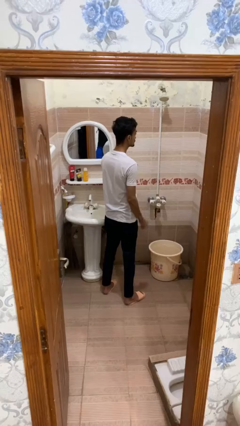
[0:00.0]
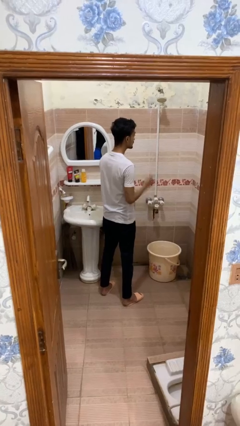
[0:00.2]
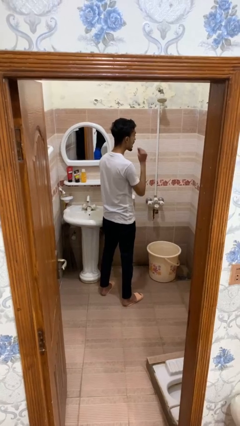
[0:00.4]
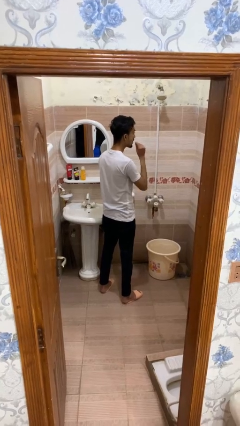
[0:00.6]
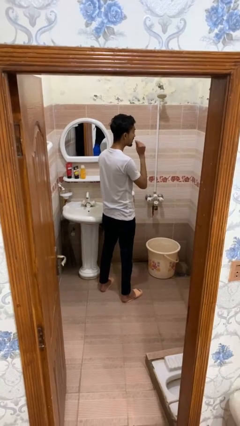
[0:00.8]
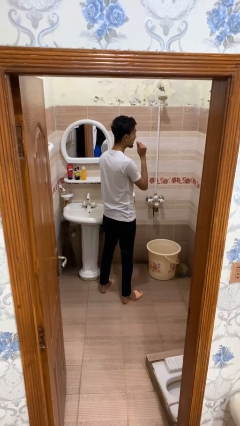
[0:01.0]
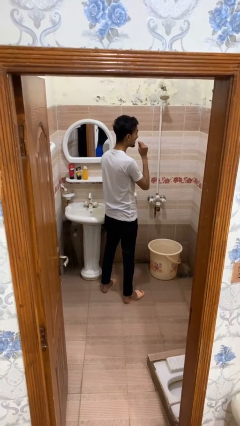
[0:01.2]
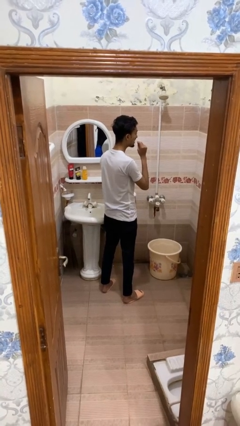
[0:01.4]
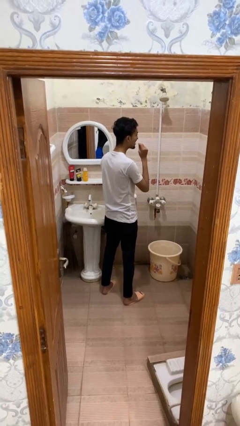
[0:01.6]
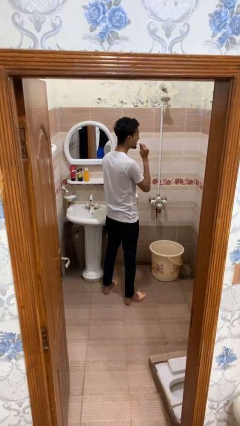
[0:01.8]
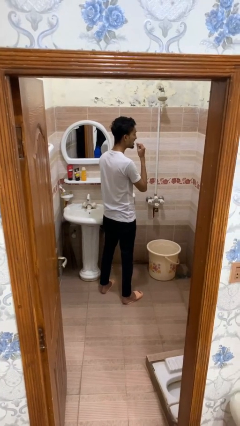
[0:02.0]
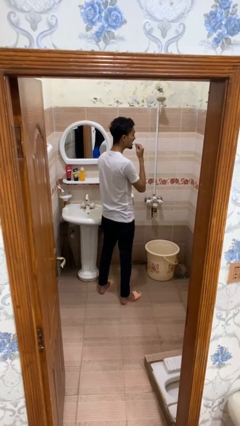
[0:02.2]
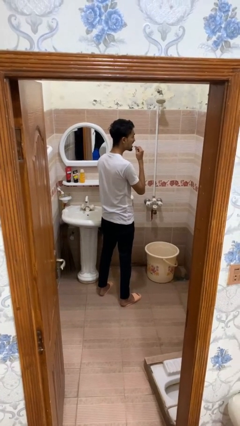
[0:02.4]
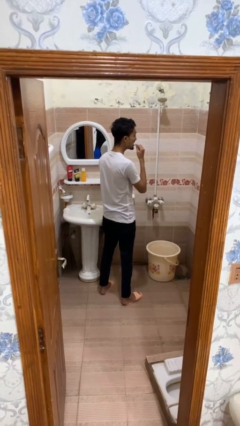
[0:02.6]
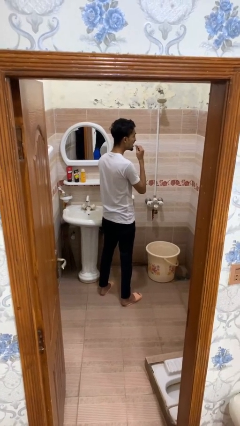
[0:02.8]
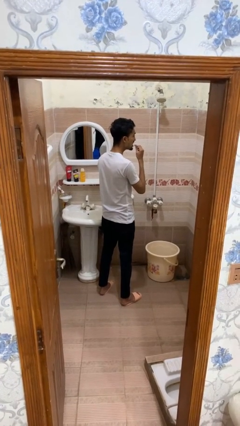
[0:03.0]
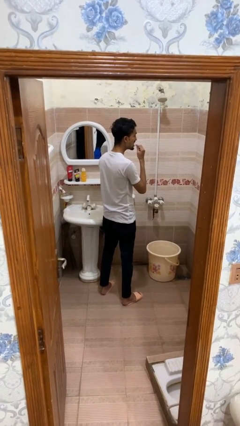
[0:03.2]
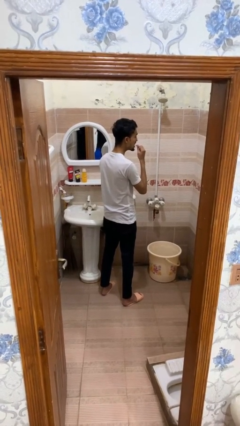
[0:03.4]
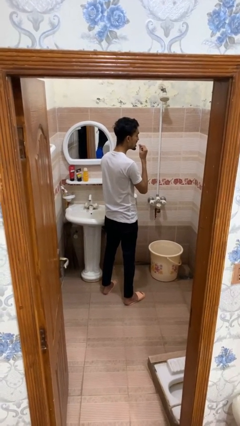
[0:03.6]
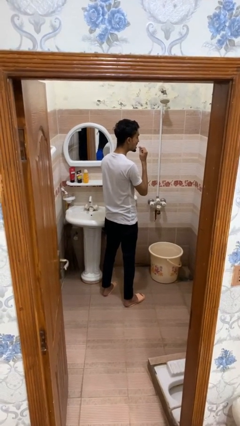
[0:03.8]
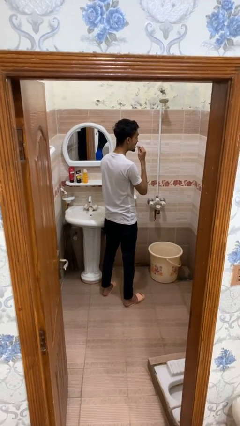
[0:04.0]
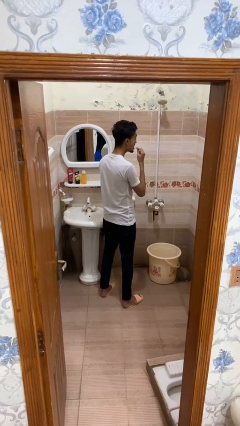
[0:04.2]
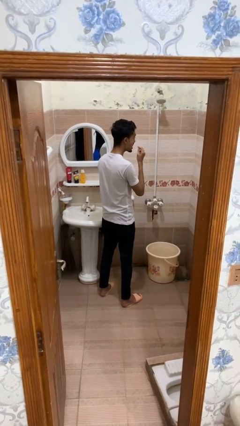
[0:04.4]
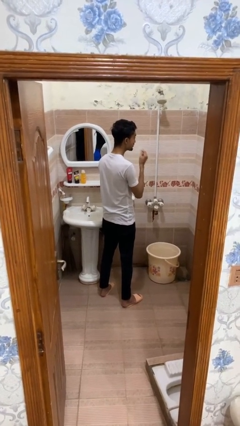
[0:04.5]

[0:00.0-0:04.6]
person flosses

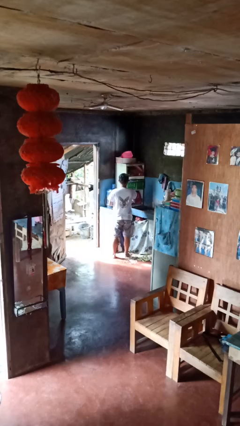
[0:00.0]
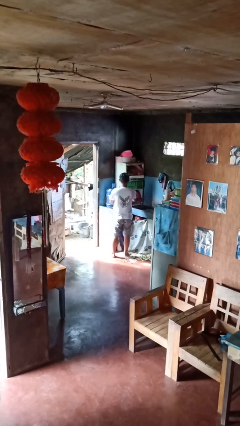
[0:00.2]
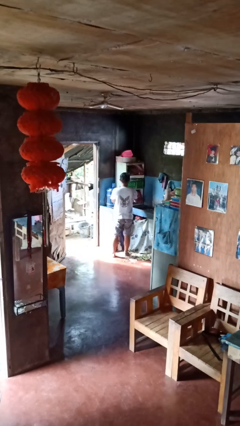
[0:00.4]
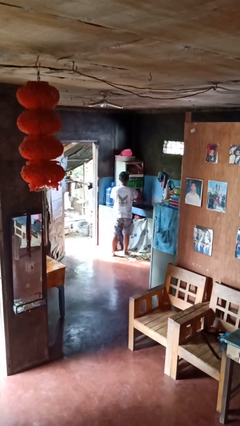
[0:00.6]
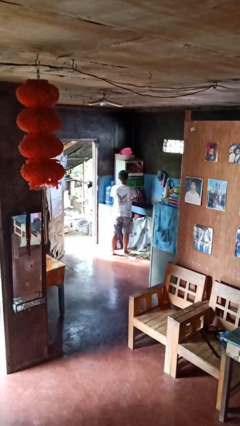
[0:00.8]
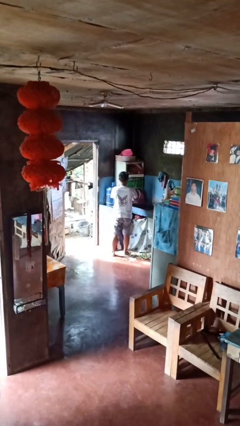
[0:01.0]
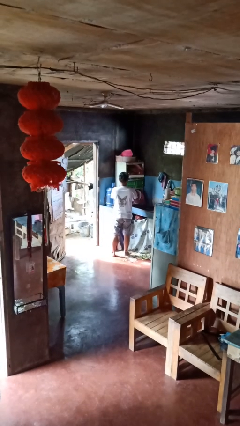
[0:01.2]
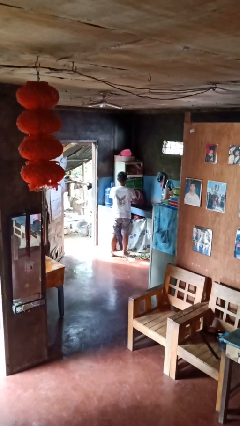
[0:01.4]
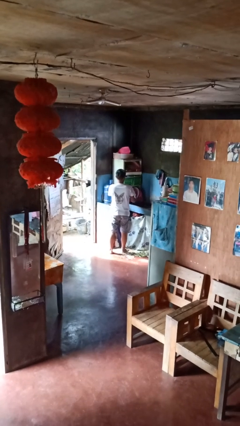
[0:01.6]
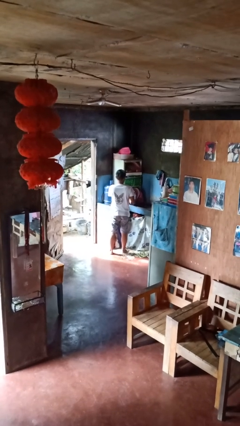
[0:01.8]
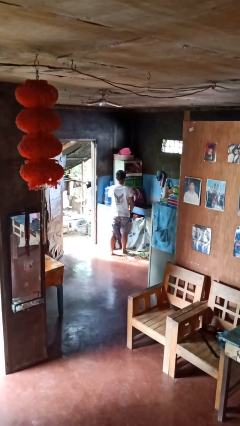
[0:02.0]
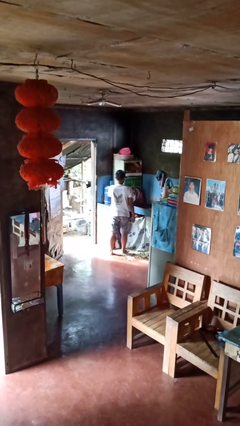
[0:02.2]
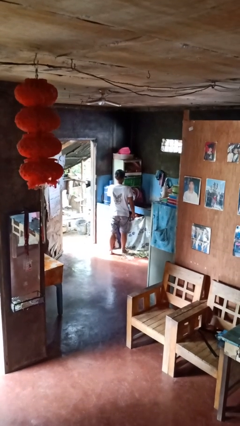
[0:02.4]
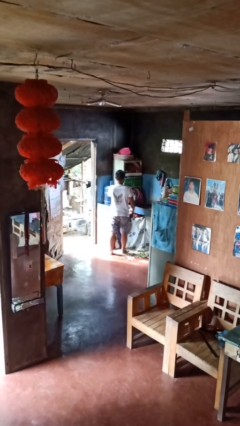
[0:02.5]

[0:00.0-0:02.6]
person opens dishwasher

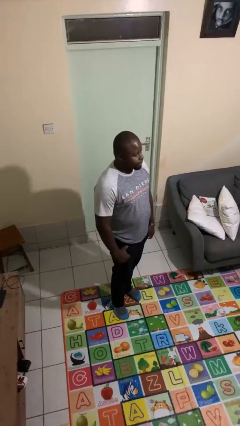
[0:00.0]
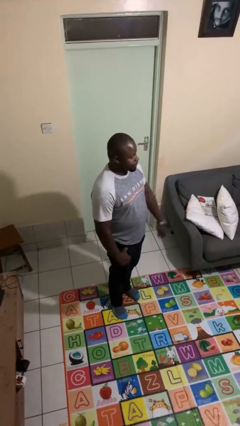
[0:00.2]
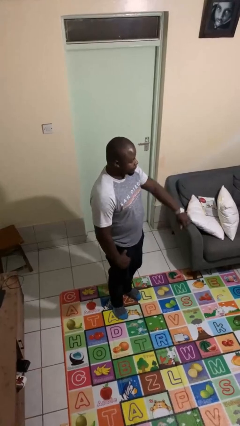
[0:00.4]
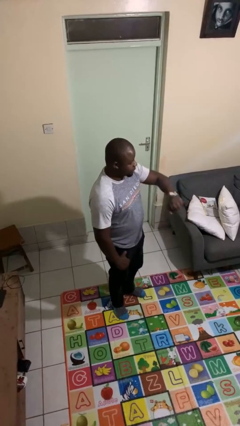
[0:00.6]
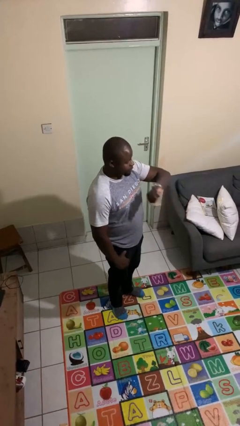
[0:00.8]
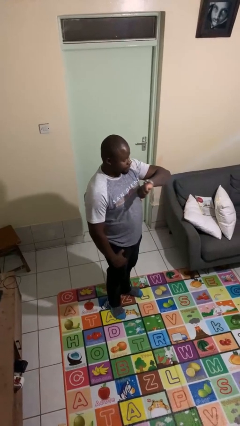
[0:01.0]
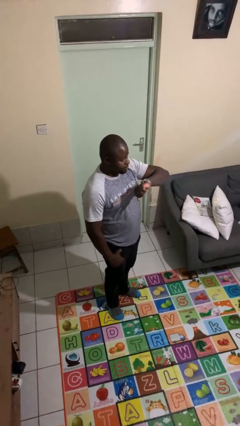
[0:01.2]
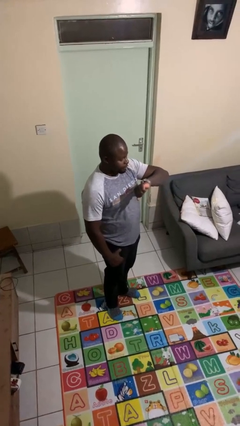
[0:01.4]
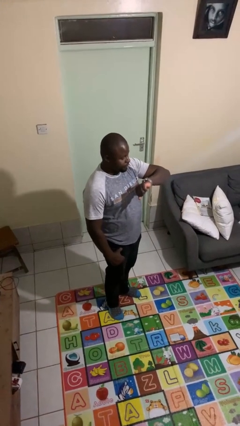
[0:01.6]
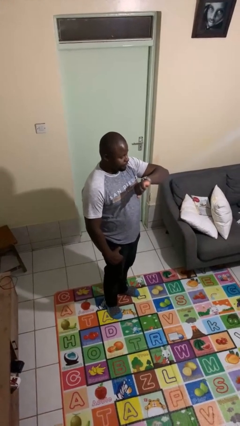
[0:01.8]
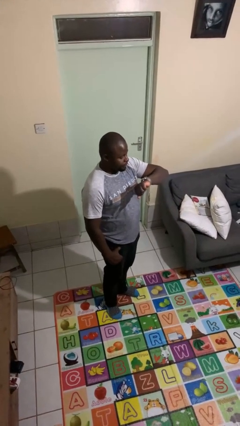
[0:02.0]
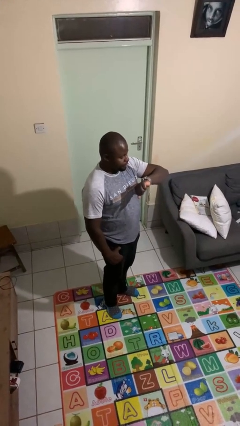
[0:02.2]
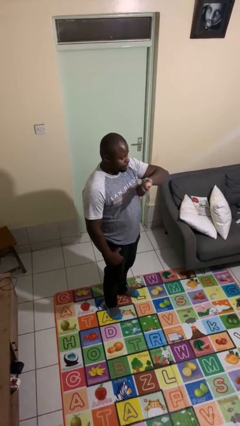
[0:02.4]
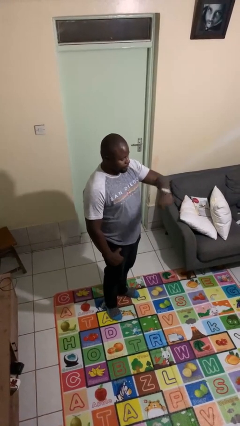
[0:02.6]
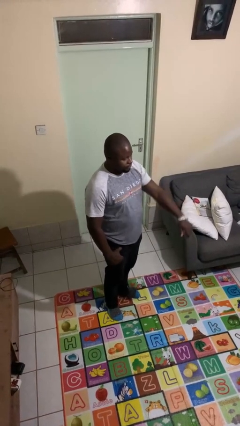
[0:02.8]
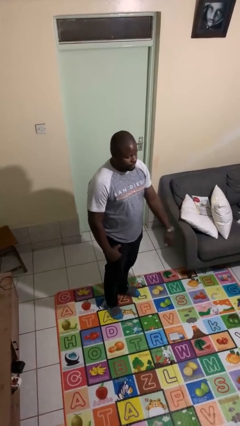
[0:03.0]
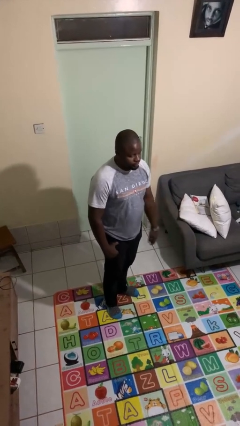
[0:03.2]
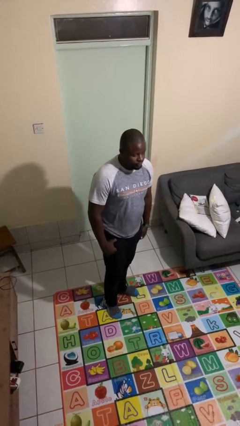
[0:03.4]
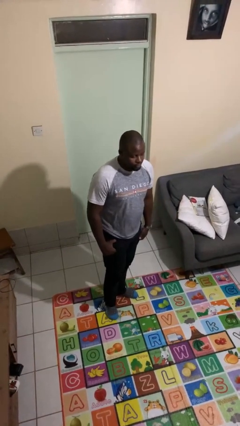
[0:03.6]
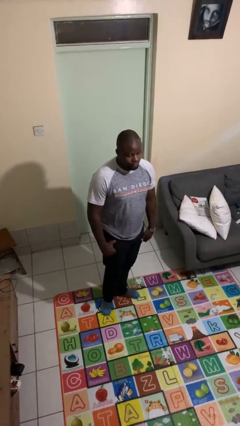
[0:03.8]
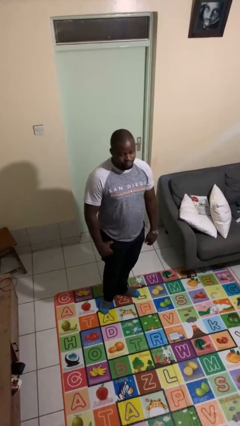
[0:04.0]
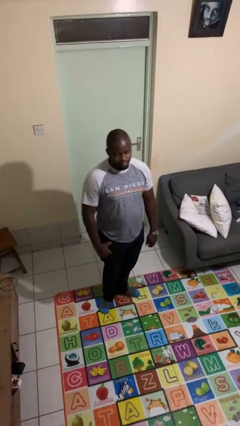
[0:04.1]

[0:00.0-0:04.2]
person looks at wristwatch

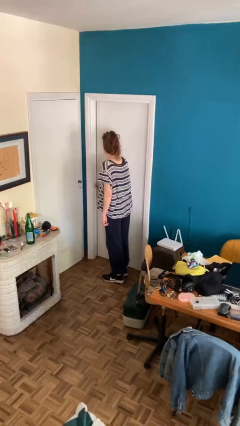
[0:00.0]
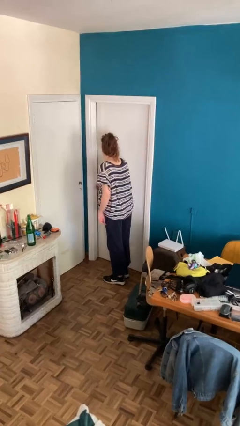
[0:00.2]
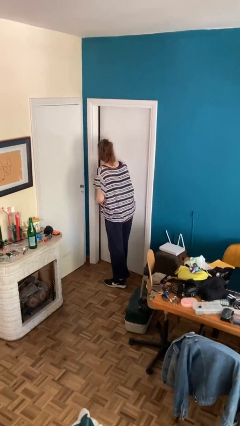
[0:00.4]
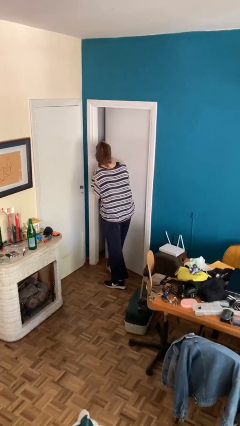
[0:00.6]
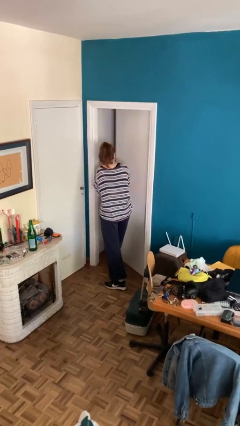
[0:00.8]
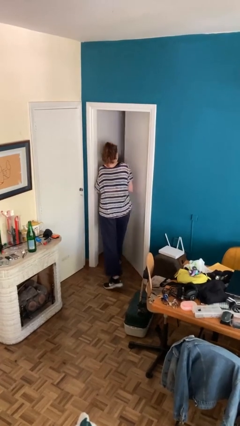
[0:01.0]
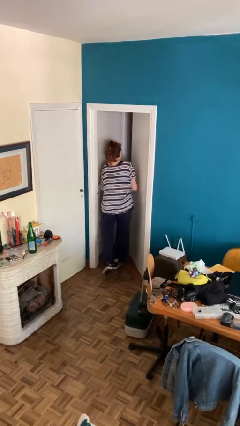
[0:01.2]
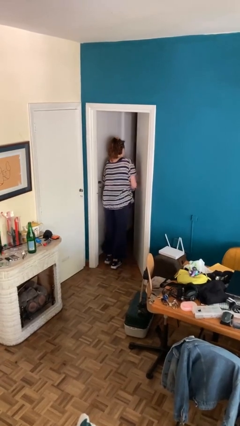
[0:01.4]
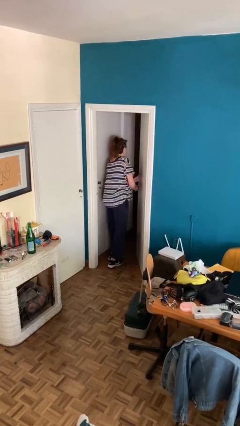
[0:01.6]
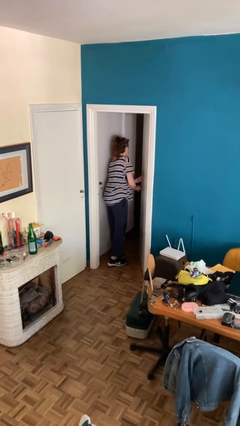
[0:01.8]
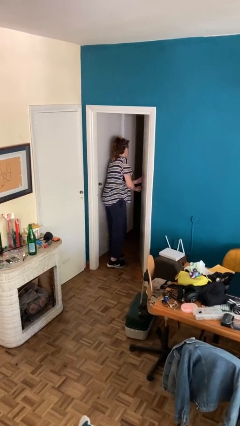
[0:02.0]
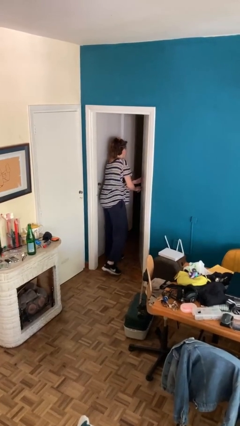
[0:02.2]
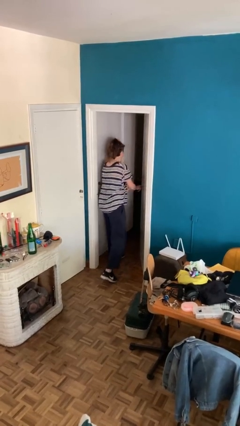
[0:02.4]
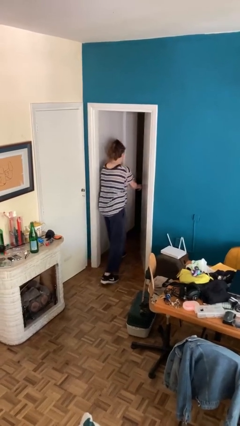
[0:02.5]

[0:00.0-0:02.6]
person opens facility door

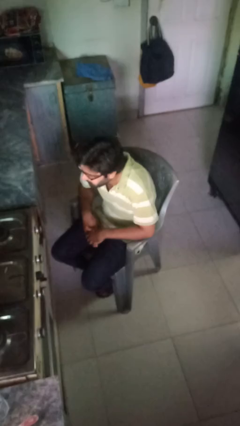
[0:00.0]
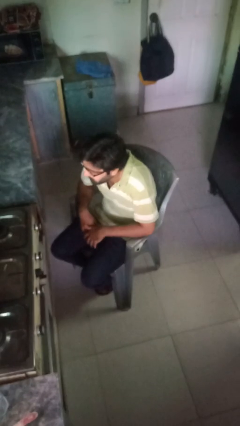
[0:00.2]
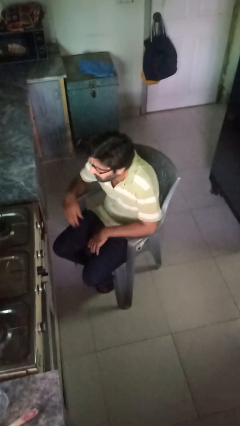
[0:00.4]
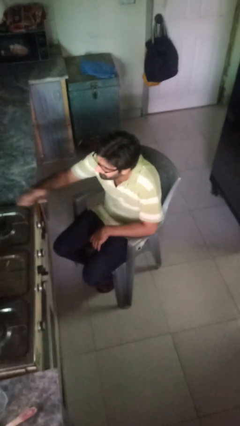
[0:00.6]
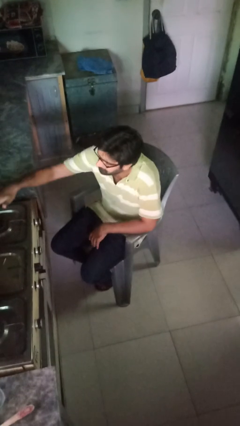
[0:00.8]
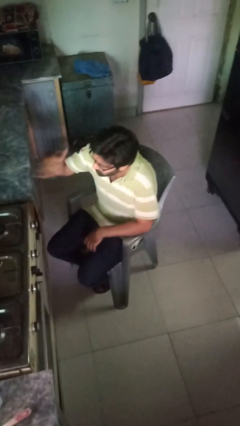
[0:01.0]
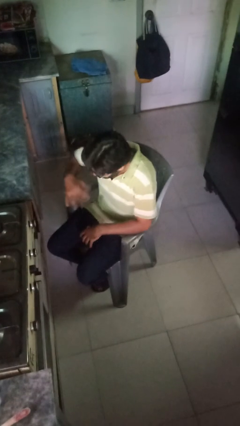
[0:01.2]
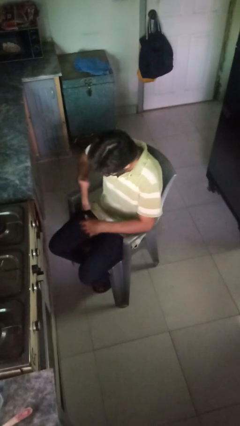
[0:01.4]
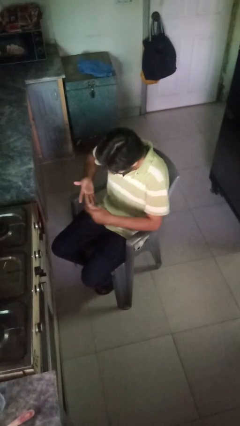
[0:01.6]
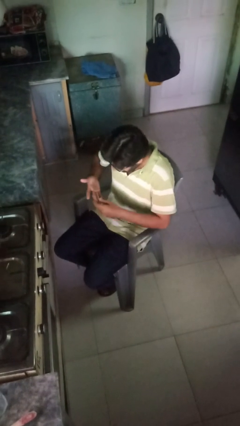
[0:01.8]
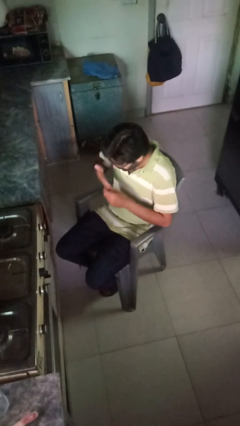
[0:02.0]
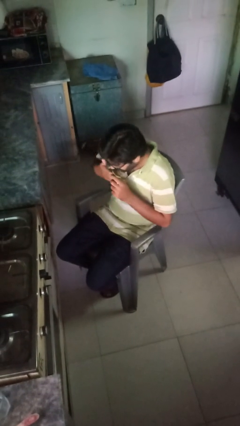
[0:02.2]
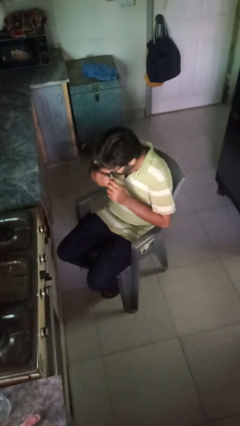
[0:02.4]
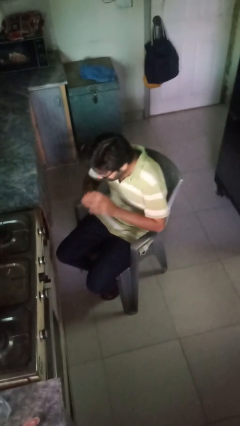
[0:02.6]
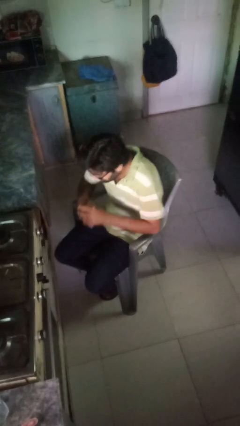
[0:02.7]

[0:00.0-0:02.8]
person burns hand

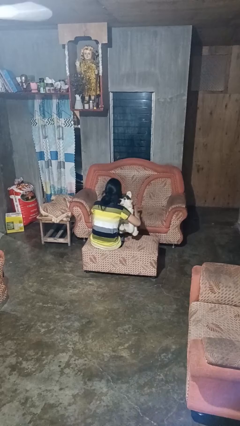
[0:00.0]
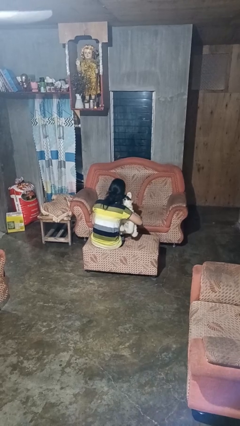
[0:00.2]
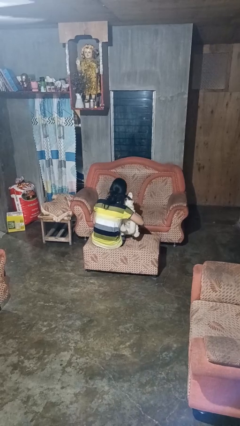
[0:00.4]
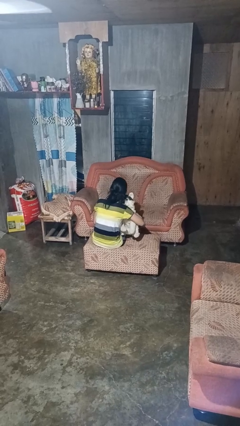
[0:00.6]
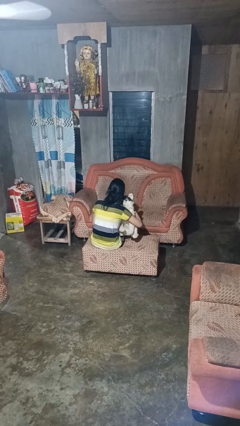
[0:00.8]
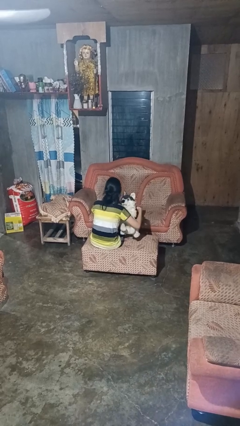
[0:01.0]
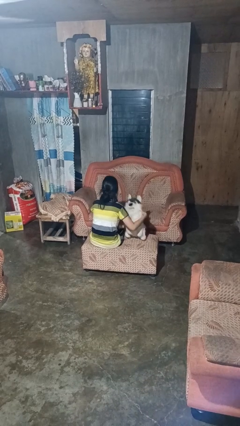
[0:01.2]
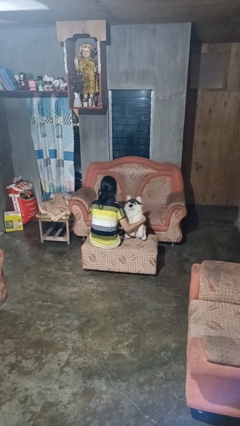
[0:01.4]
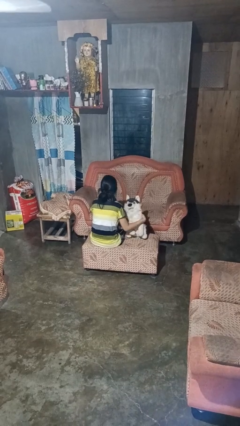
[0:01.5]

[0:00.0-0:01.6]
person hugs stuffed animal
